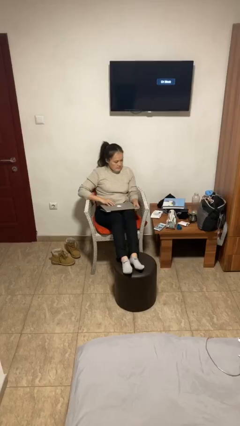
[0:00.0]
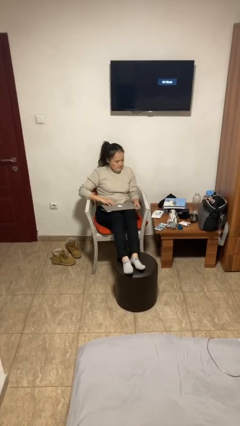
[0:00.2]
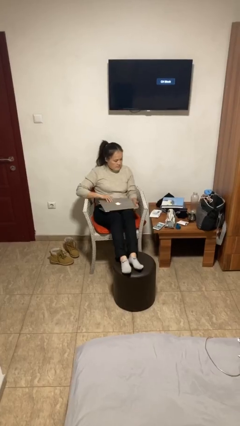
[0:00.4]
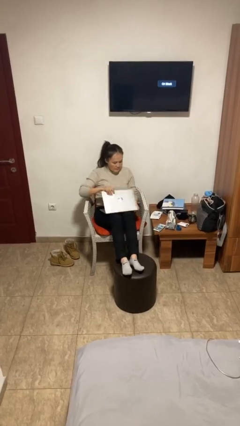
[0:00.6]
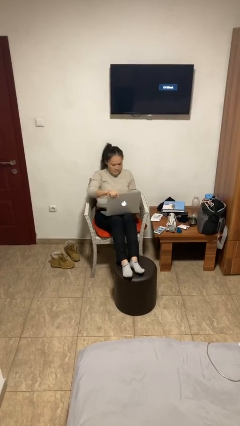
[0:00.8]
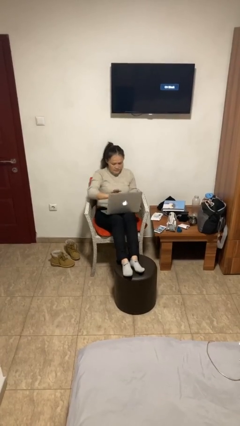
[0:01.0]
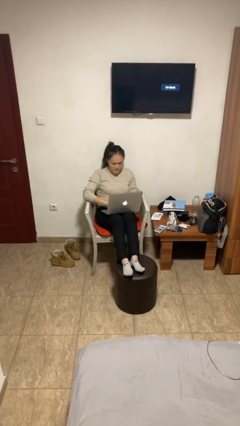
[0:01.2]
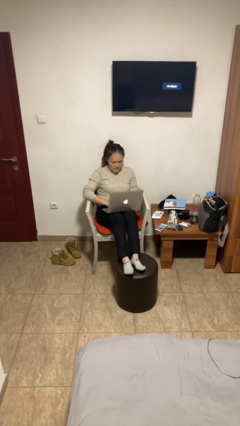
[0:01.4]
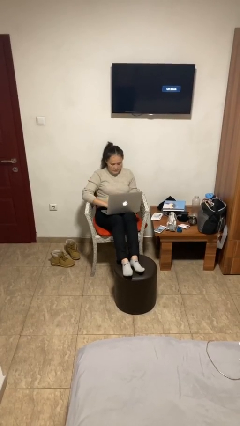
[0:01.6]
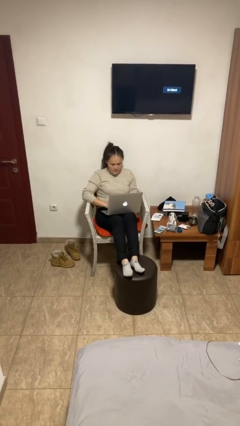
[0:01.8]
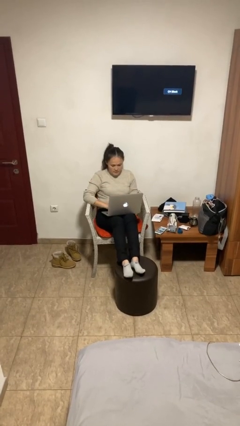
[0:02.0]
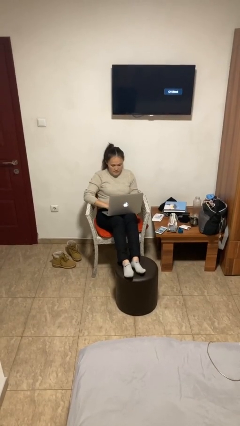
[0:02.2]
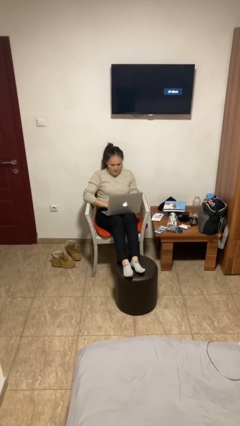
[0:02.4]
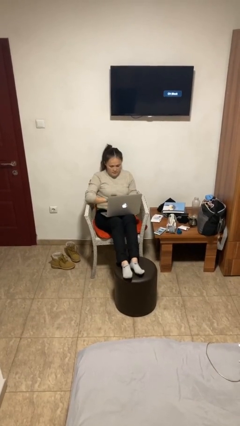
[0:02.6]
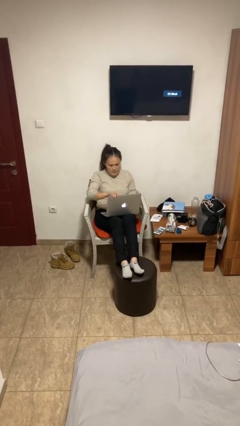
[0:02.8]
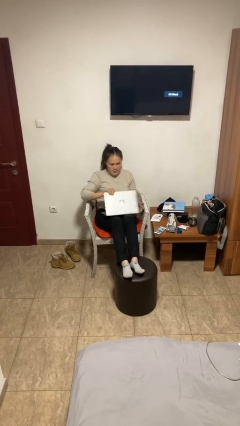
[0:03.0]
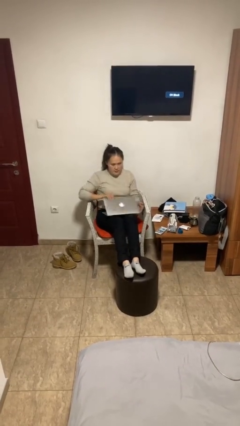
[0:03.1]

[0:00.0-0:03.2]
person interacts with laptop

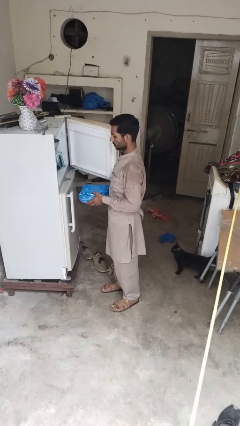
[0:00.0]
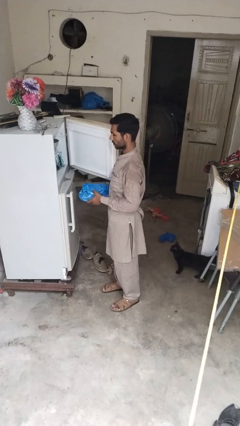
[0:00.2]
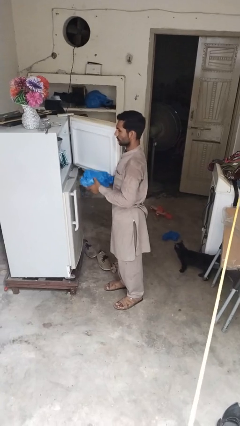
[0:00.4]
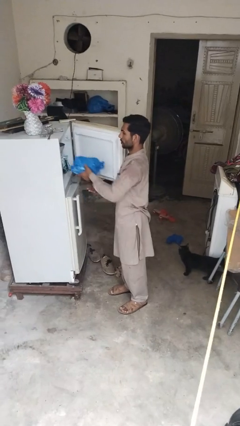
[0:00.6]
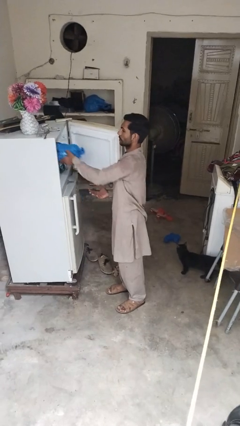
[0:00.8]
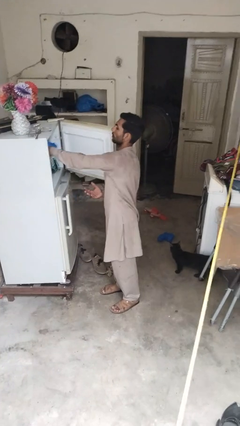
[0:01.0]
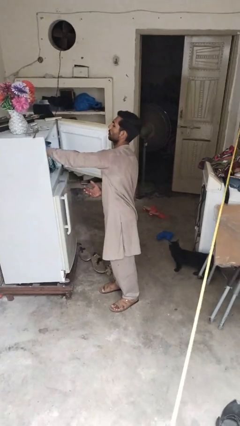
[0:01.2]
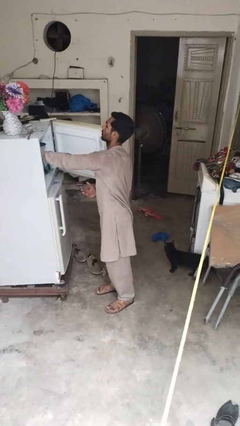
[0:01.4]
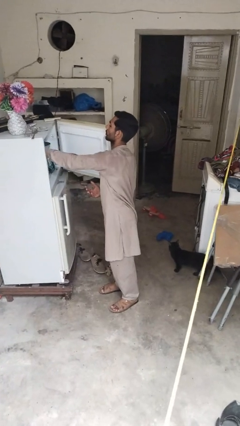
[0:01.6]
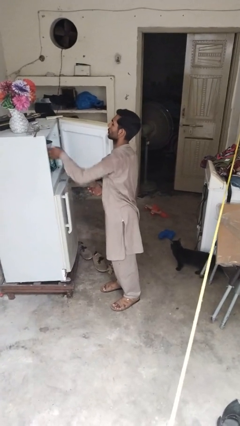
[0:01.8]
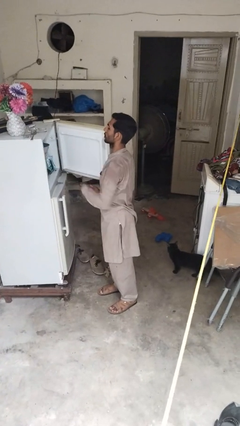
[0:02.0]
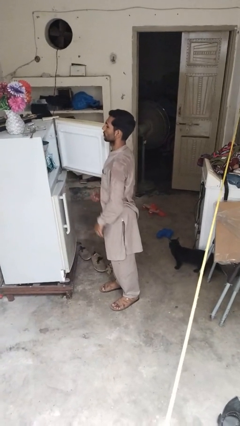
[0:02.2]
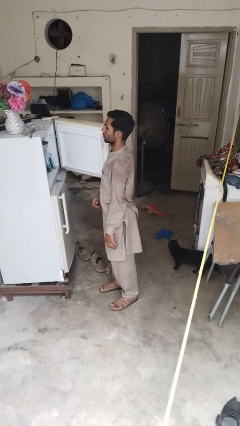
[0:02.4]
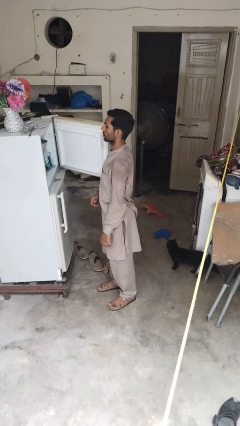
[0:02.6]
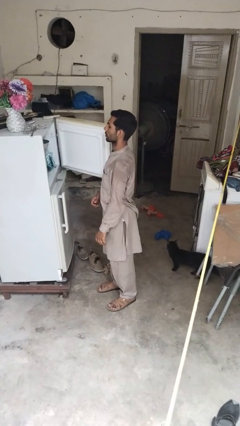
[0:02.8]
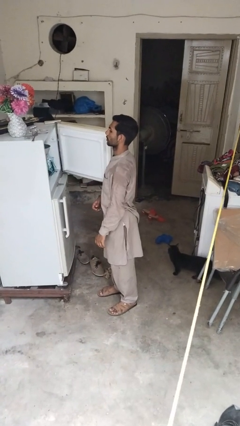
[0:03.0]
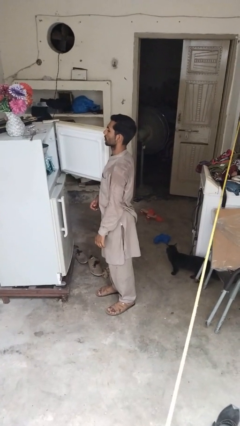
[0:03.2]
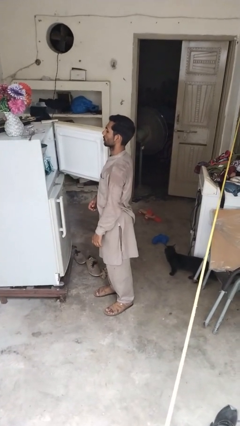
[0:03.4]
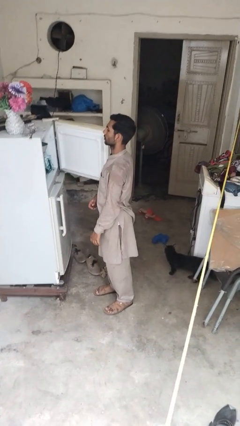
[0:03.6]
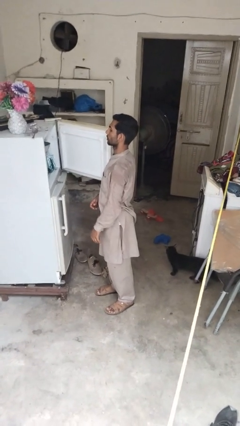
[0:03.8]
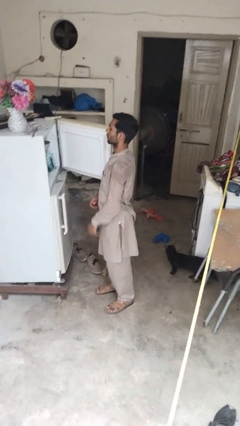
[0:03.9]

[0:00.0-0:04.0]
person loads groceries into refrigerator

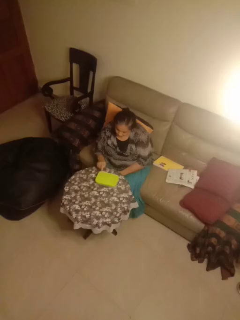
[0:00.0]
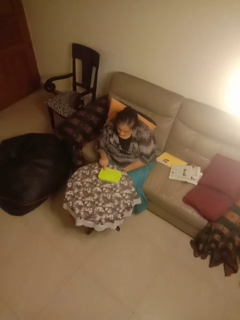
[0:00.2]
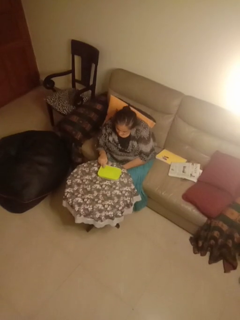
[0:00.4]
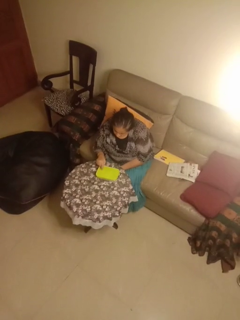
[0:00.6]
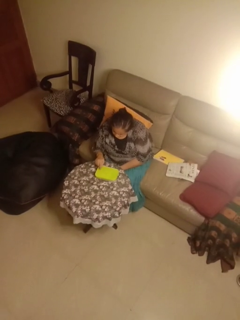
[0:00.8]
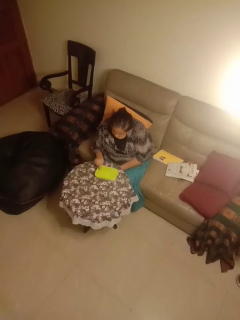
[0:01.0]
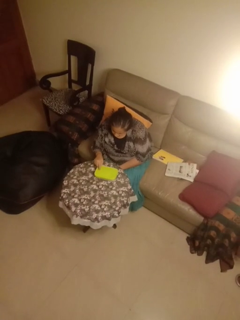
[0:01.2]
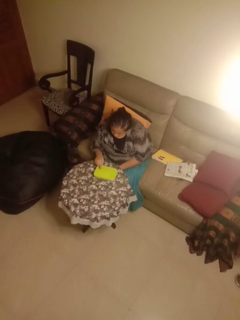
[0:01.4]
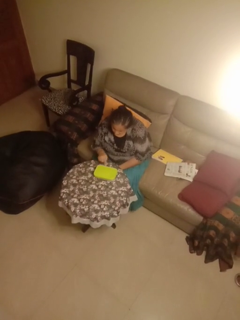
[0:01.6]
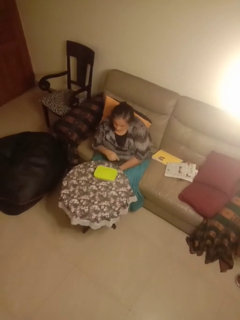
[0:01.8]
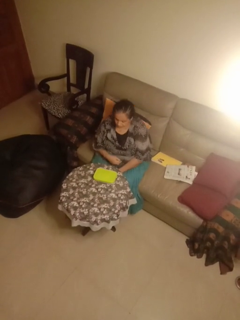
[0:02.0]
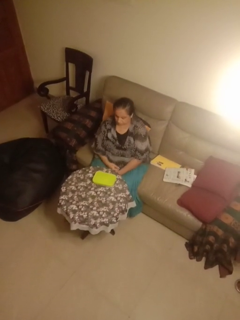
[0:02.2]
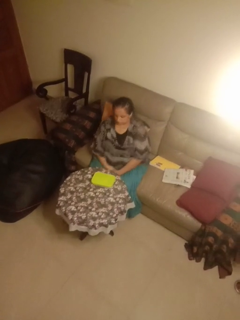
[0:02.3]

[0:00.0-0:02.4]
person taps object with finger

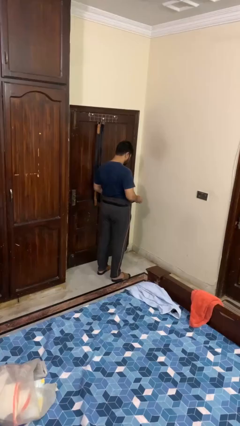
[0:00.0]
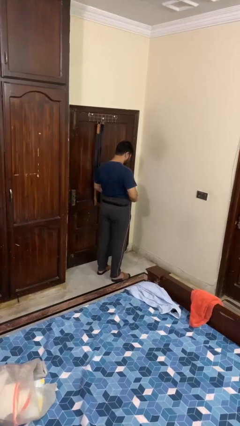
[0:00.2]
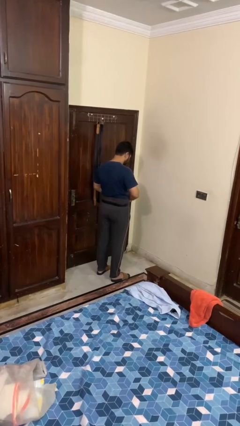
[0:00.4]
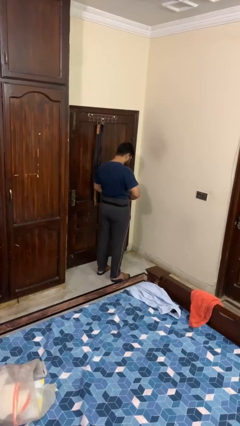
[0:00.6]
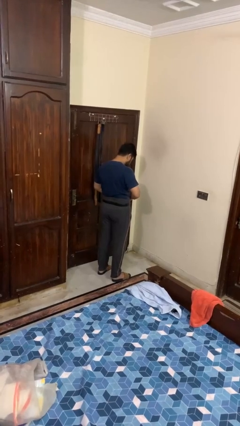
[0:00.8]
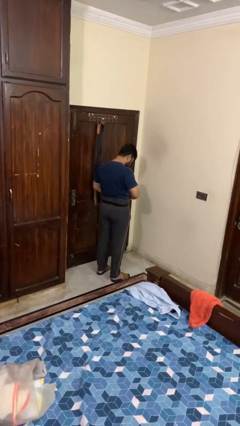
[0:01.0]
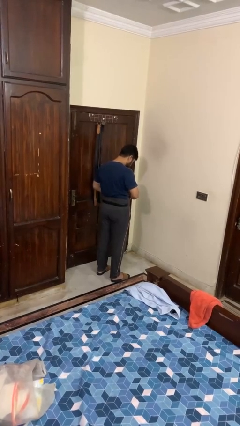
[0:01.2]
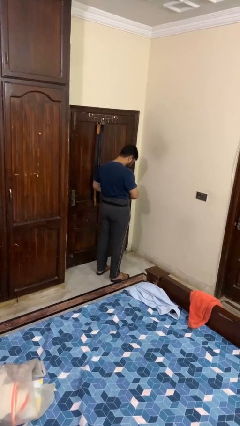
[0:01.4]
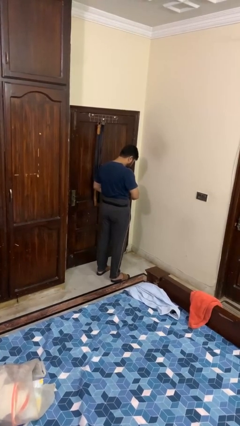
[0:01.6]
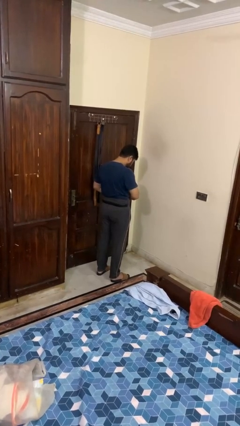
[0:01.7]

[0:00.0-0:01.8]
person puts on belt

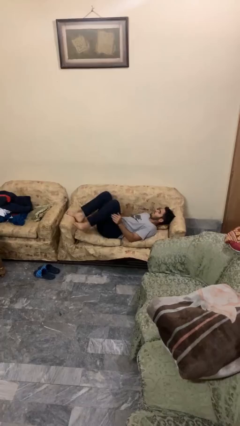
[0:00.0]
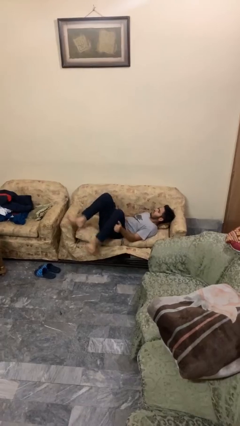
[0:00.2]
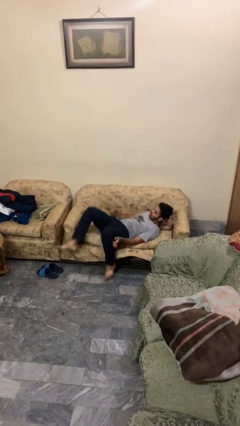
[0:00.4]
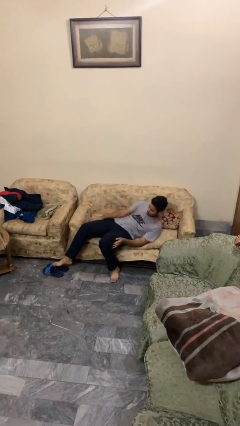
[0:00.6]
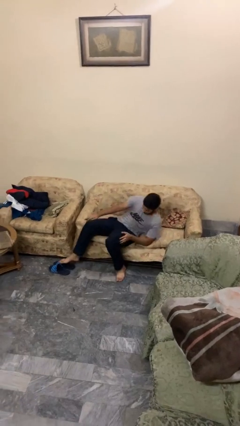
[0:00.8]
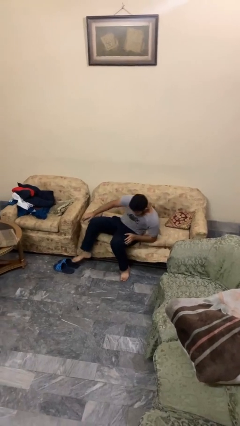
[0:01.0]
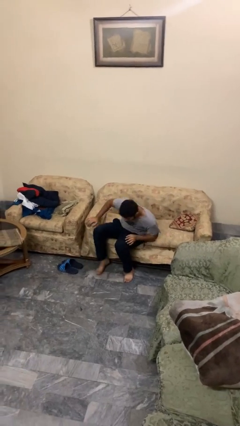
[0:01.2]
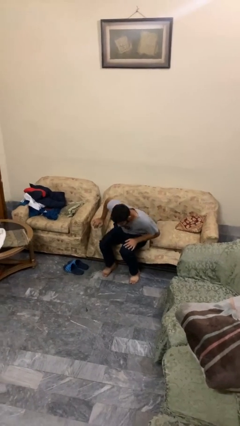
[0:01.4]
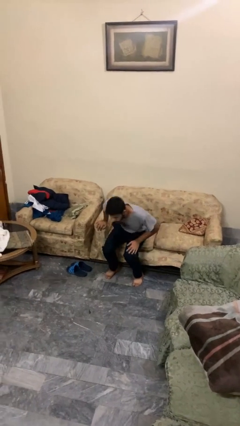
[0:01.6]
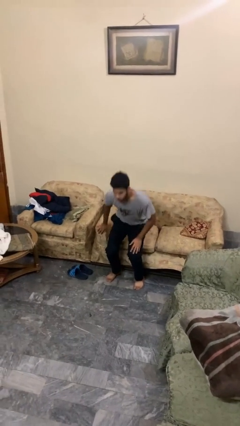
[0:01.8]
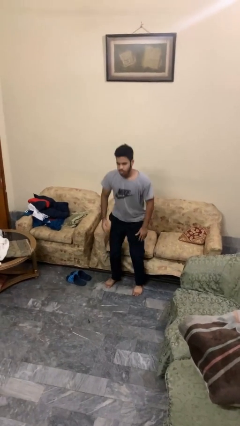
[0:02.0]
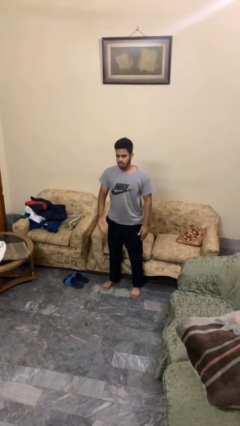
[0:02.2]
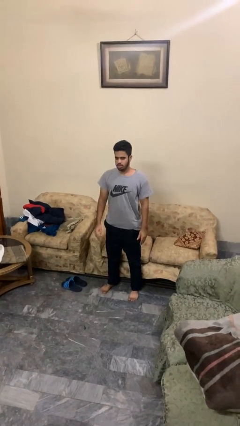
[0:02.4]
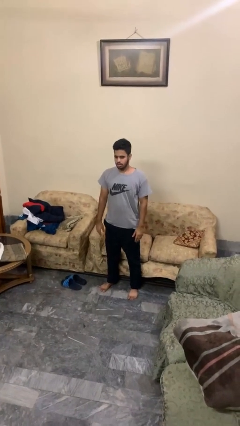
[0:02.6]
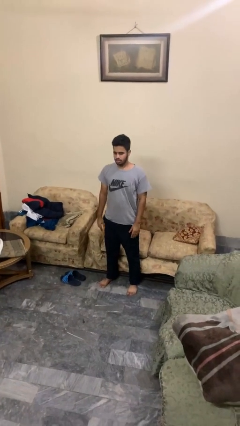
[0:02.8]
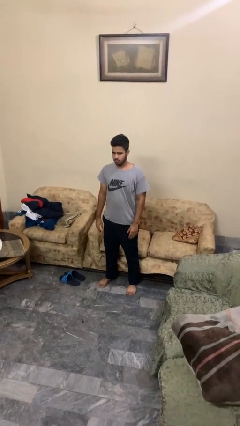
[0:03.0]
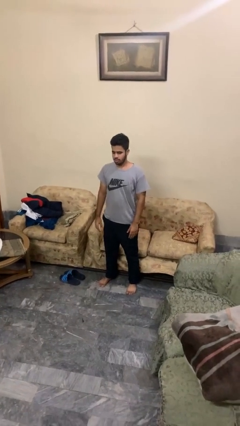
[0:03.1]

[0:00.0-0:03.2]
person stands up

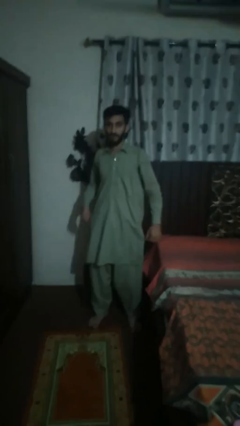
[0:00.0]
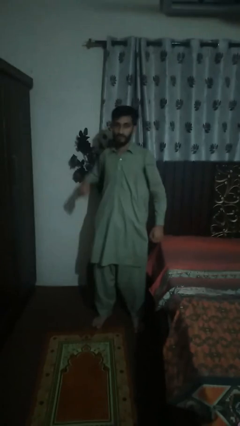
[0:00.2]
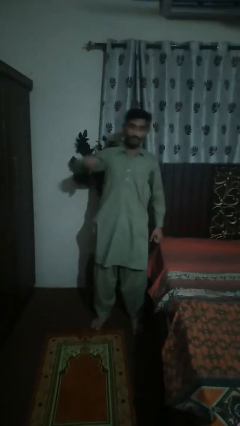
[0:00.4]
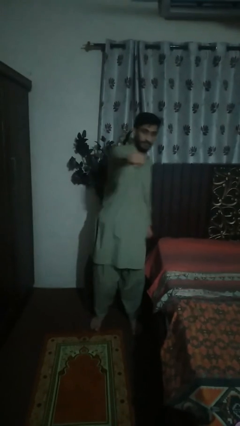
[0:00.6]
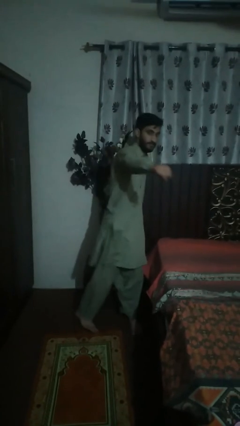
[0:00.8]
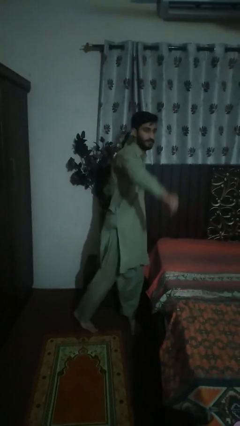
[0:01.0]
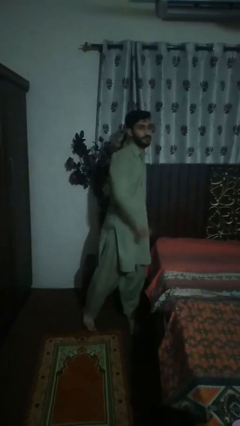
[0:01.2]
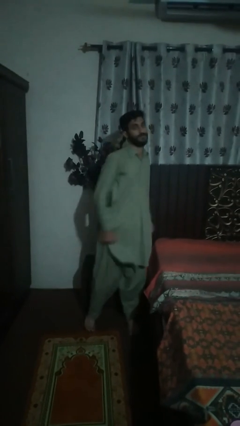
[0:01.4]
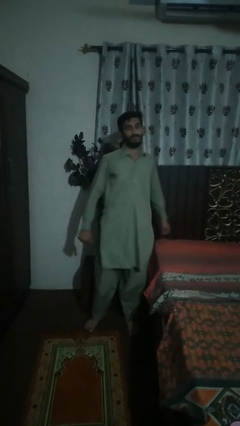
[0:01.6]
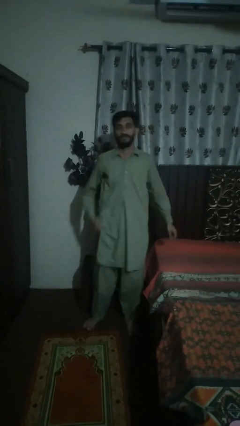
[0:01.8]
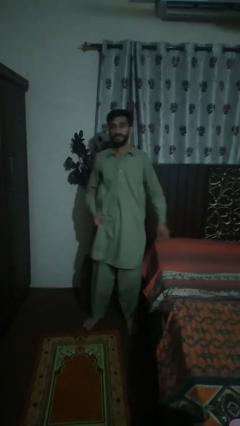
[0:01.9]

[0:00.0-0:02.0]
person punches

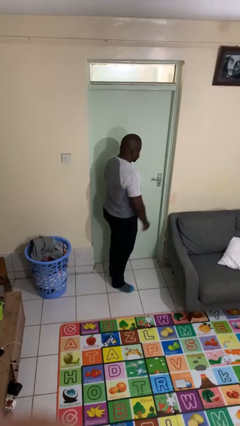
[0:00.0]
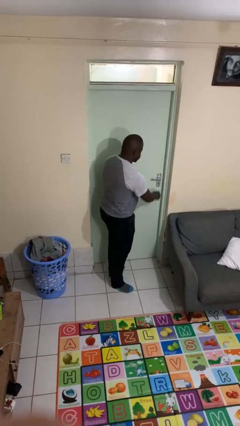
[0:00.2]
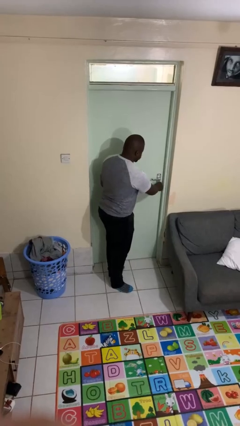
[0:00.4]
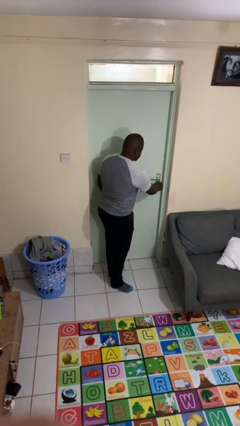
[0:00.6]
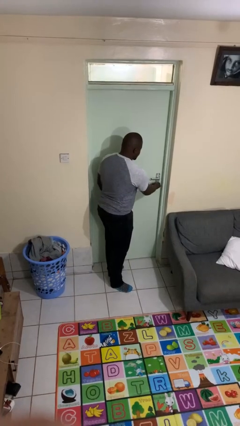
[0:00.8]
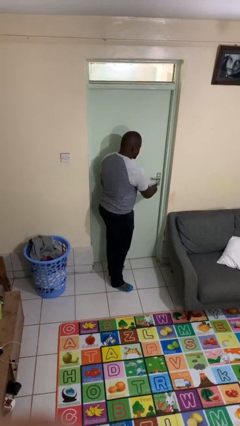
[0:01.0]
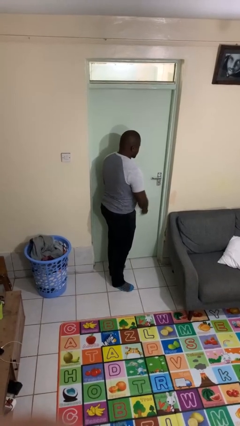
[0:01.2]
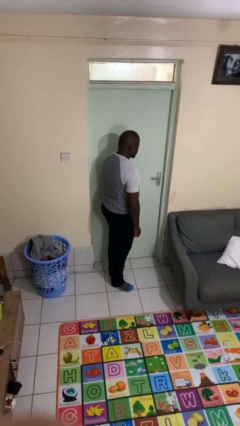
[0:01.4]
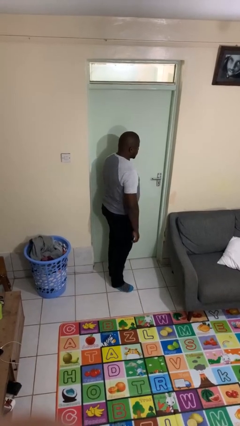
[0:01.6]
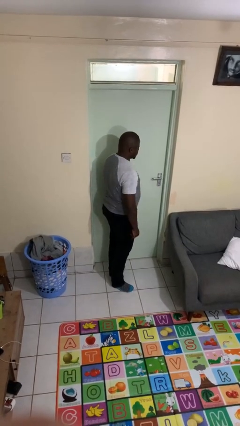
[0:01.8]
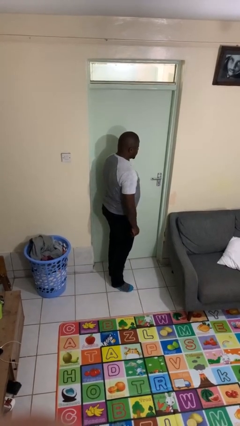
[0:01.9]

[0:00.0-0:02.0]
person locks door with keys
